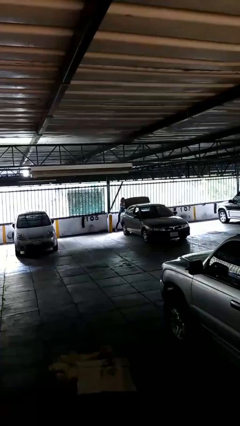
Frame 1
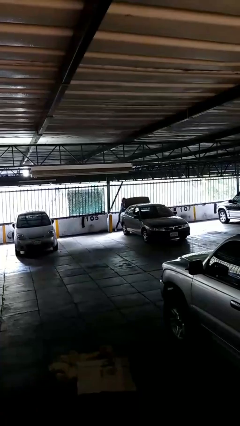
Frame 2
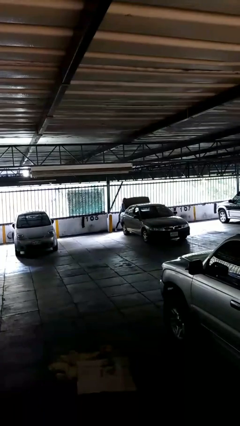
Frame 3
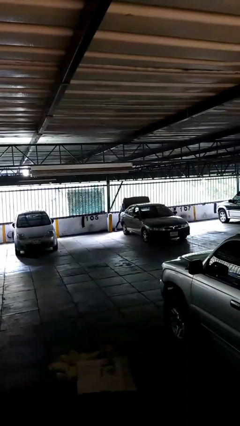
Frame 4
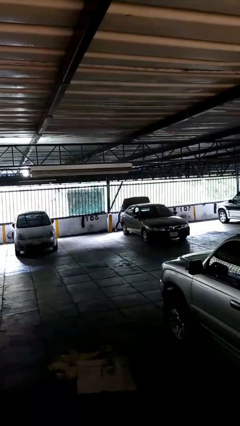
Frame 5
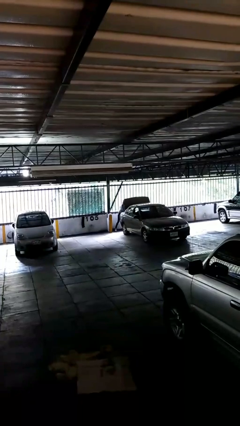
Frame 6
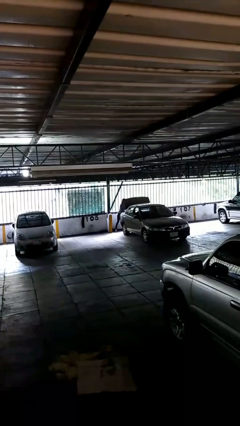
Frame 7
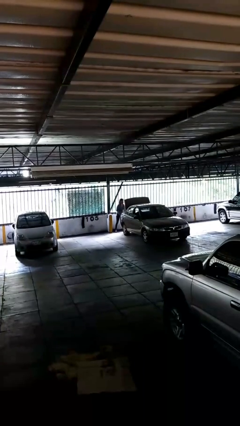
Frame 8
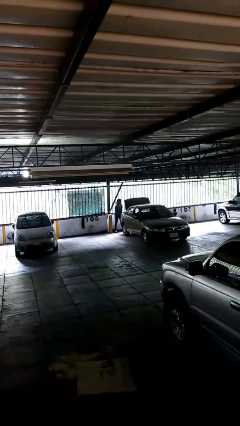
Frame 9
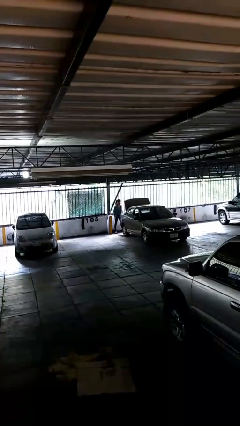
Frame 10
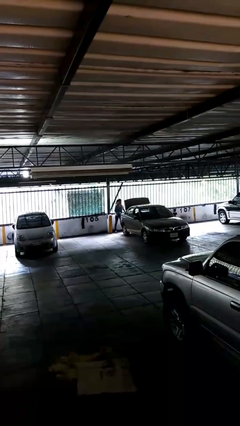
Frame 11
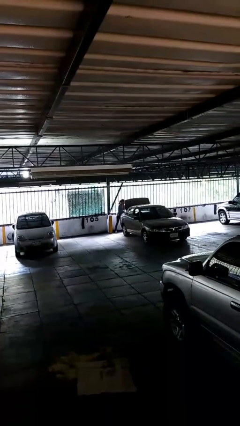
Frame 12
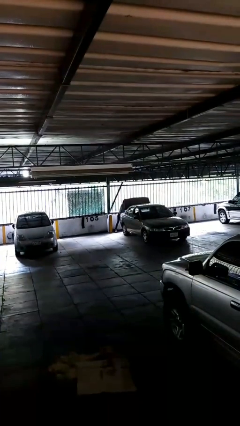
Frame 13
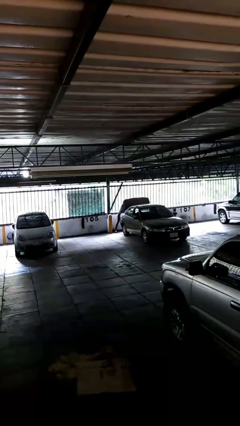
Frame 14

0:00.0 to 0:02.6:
person loads car

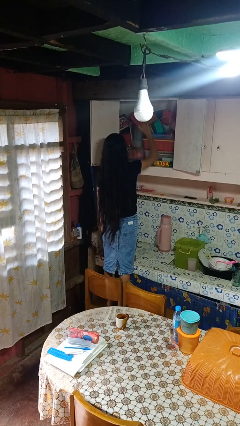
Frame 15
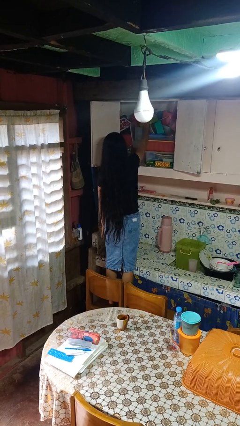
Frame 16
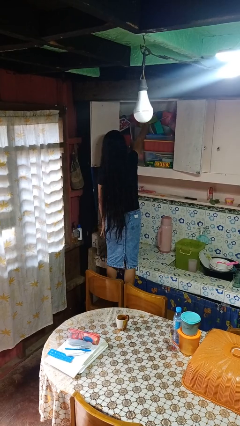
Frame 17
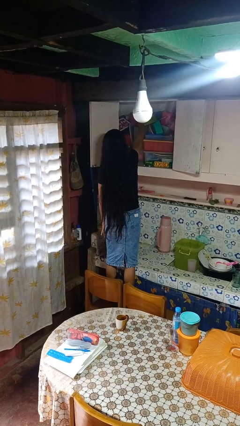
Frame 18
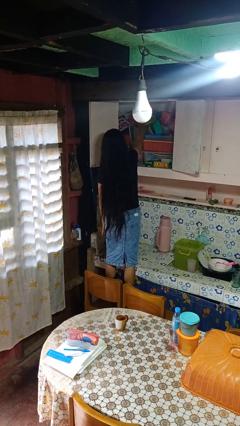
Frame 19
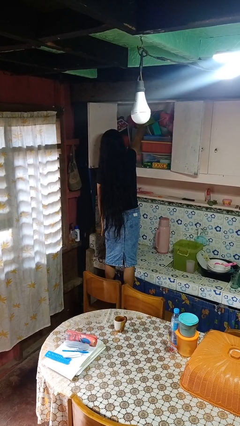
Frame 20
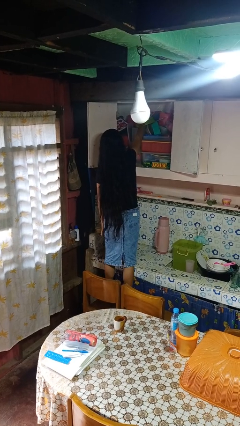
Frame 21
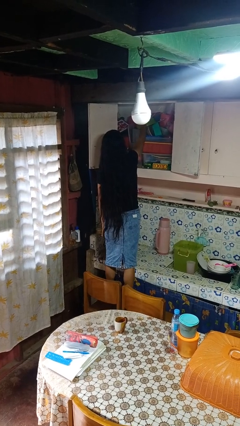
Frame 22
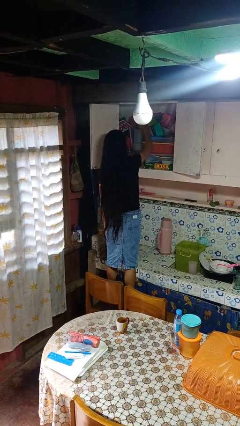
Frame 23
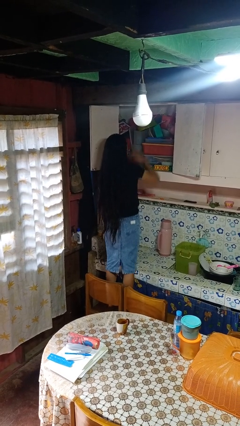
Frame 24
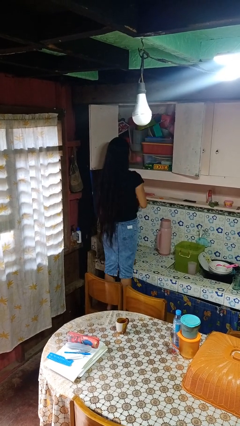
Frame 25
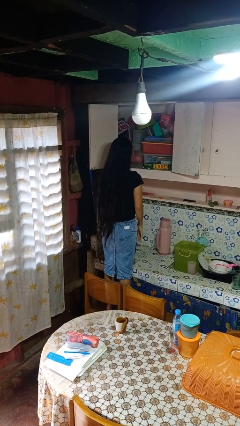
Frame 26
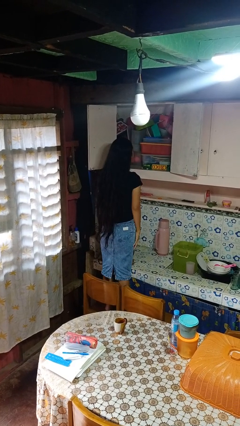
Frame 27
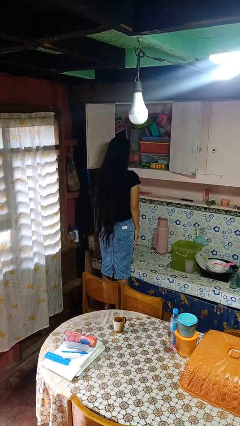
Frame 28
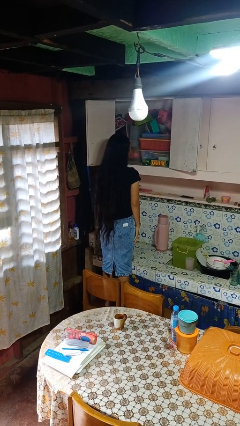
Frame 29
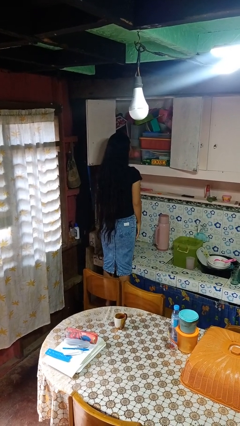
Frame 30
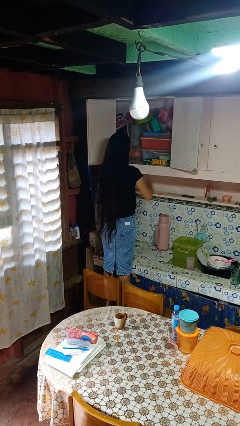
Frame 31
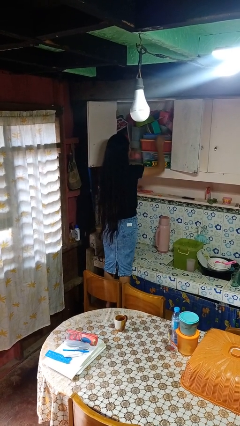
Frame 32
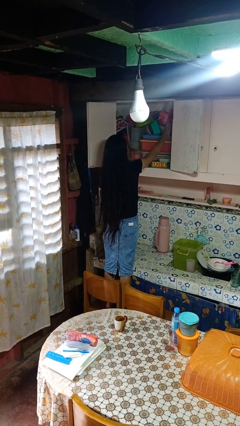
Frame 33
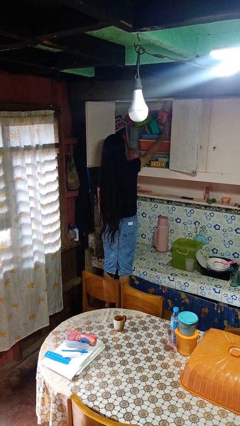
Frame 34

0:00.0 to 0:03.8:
person puts object in cabinet

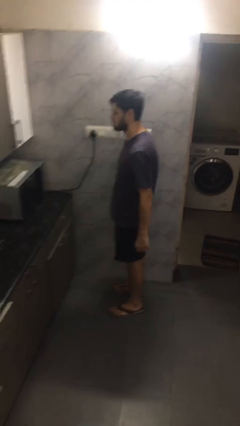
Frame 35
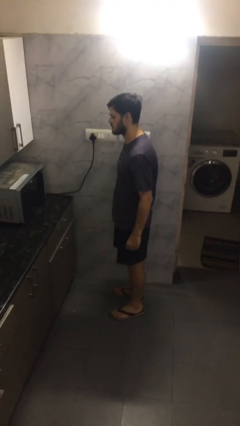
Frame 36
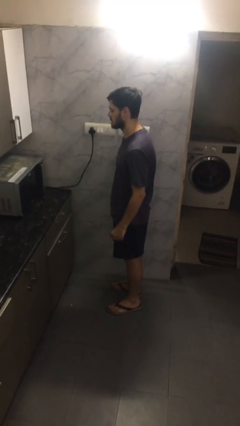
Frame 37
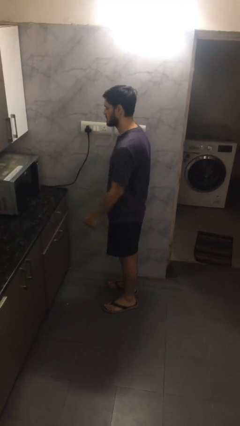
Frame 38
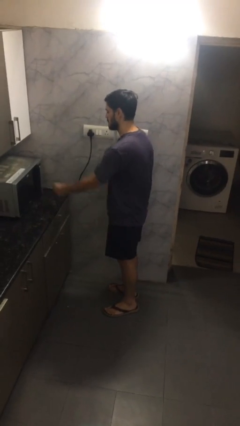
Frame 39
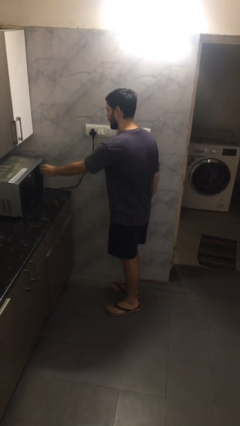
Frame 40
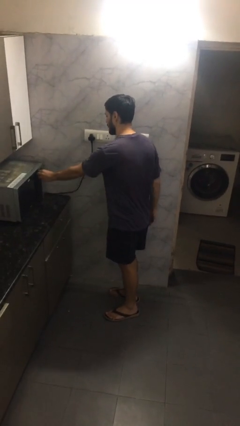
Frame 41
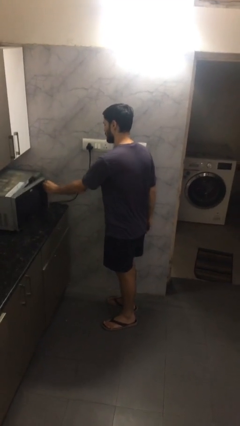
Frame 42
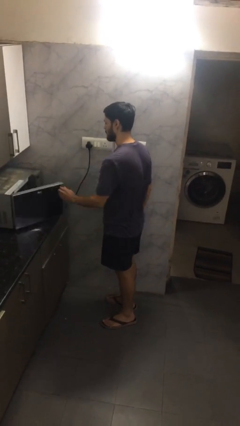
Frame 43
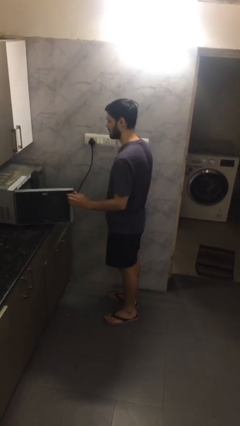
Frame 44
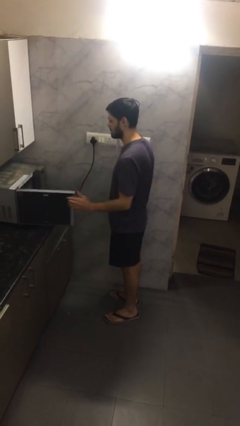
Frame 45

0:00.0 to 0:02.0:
person opens microwave

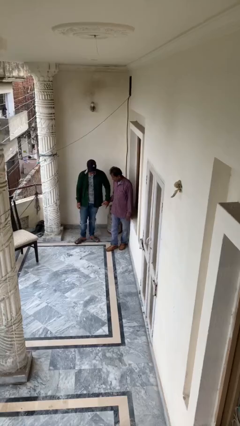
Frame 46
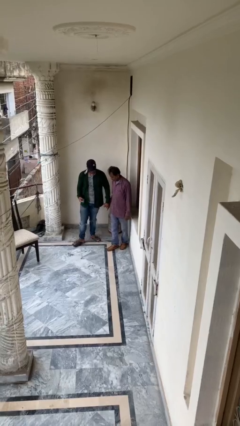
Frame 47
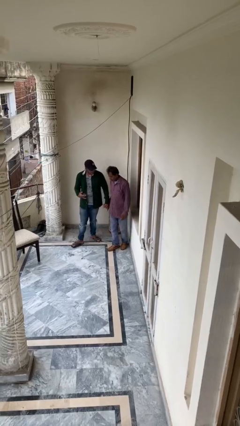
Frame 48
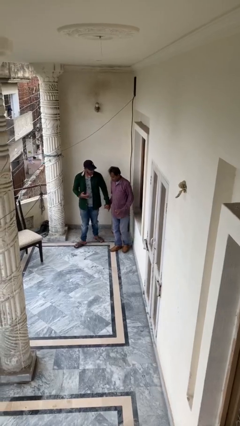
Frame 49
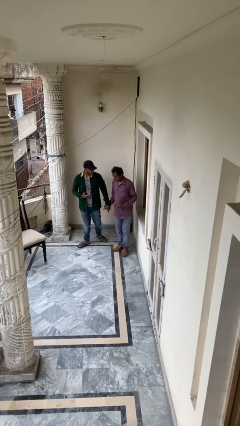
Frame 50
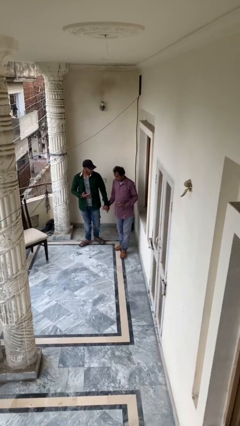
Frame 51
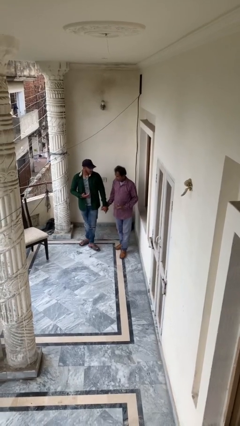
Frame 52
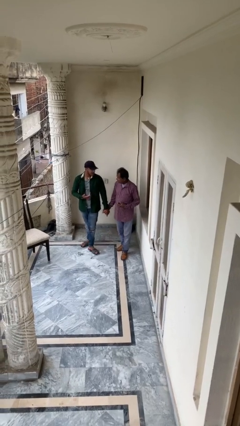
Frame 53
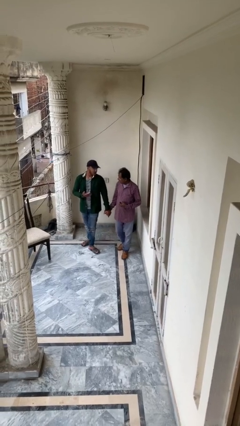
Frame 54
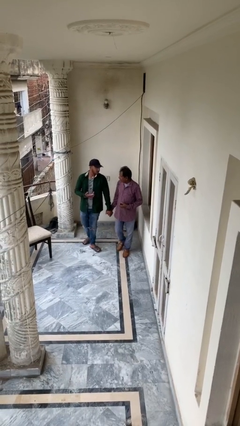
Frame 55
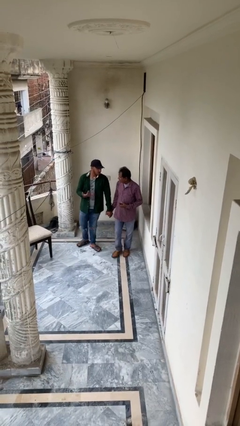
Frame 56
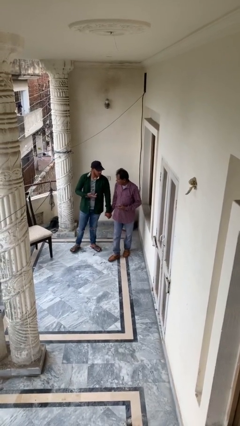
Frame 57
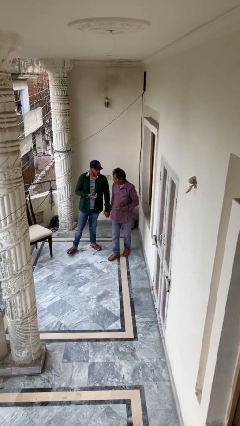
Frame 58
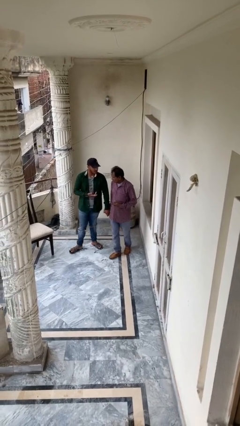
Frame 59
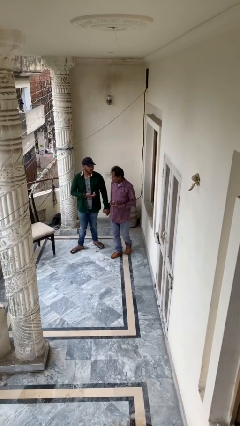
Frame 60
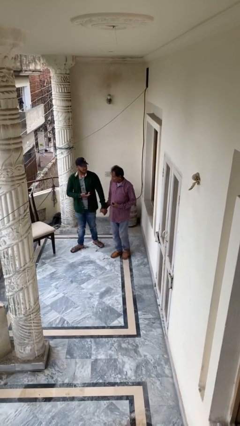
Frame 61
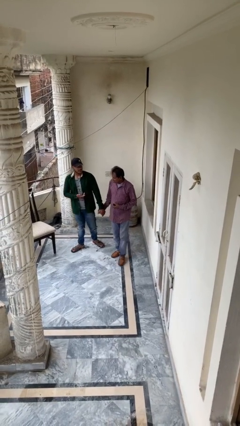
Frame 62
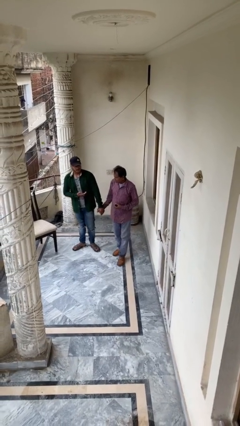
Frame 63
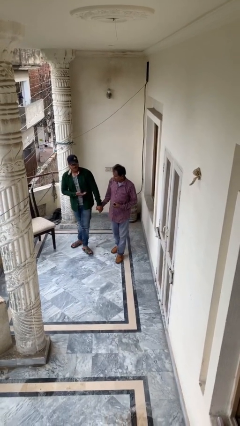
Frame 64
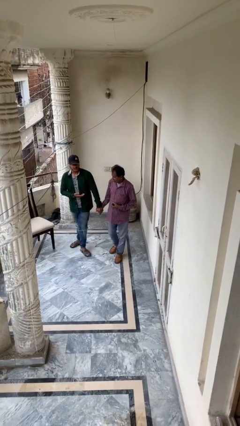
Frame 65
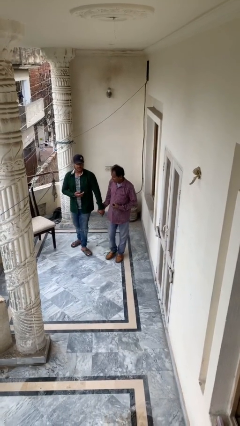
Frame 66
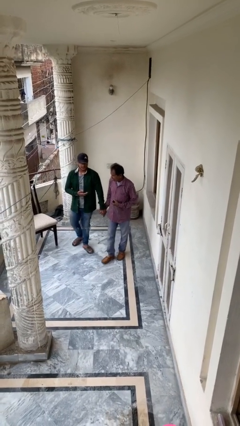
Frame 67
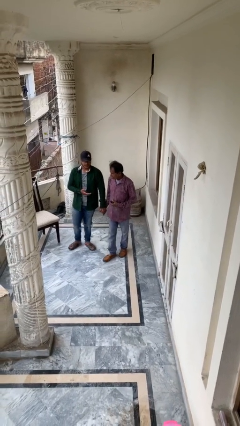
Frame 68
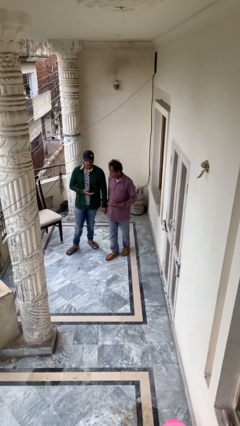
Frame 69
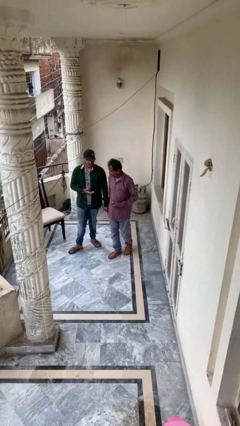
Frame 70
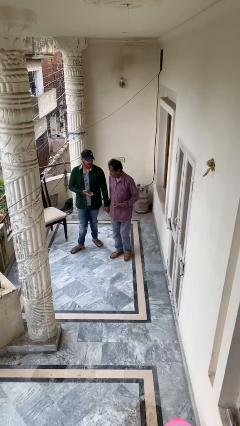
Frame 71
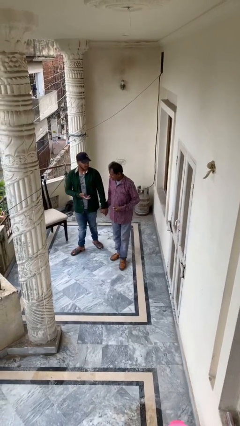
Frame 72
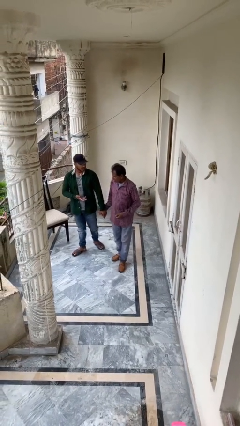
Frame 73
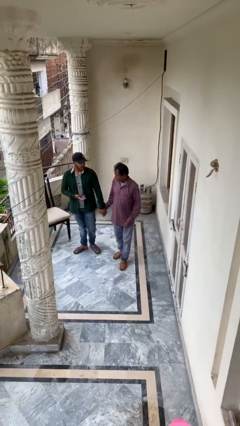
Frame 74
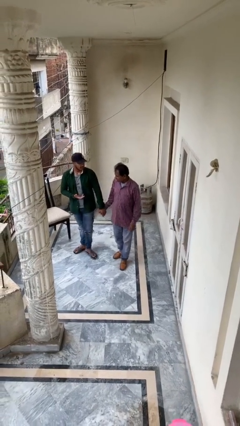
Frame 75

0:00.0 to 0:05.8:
person holds hand

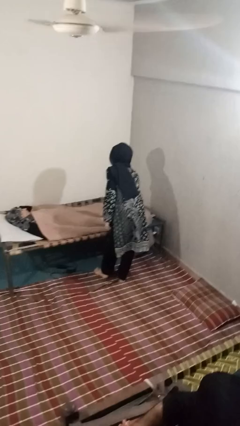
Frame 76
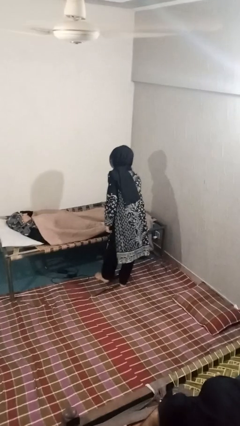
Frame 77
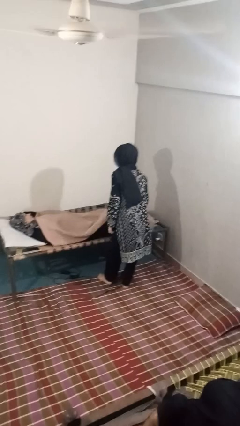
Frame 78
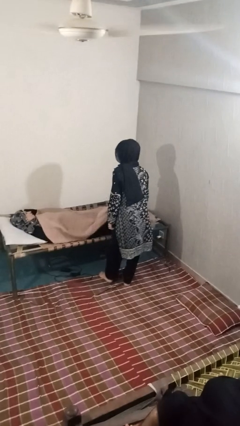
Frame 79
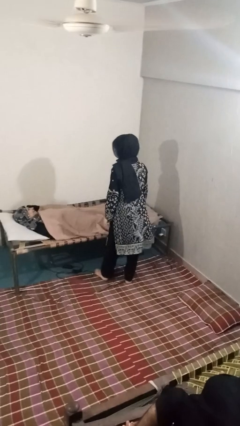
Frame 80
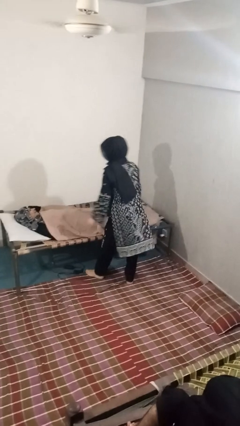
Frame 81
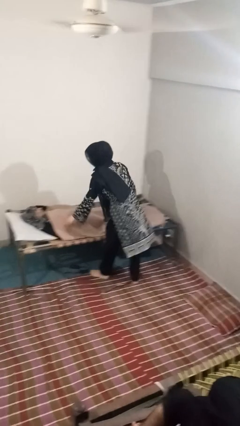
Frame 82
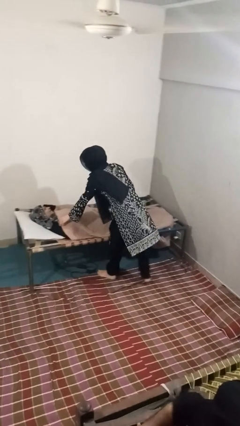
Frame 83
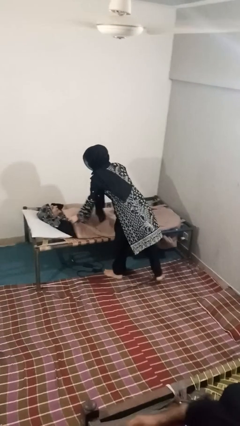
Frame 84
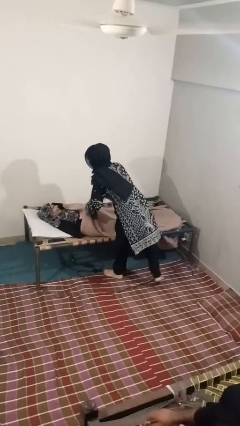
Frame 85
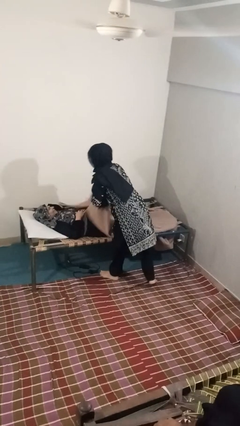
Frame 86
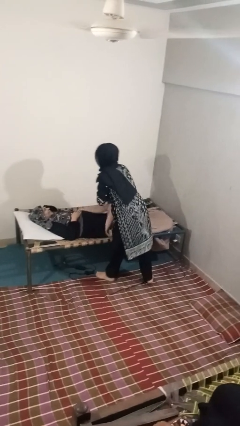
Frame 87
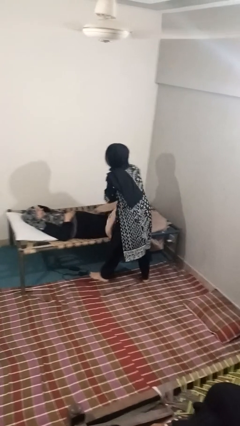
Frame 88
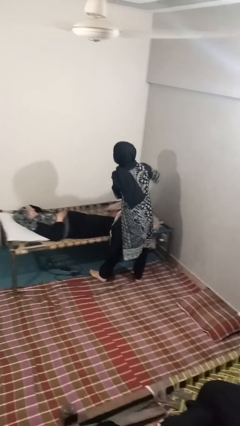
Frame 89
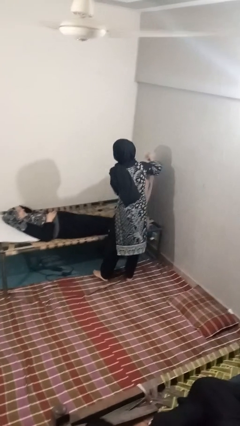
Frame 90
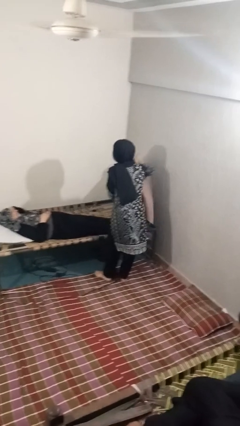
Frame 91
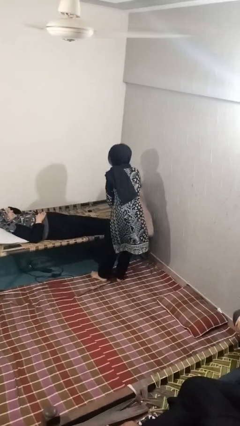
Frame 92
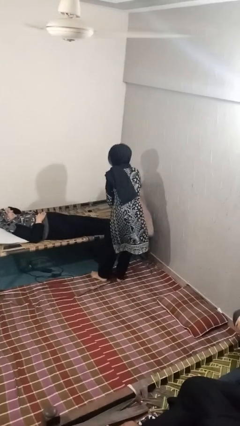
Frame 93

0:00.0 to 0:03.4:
person uncovers friend with blanket
